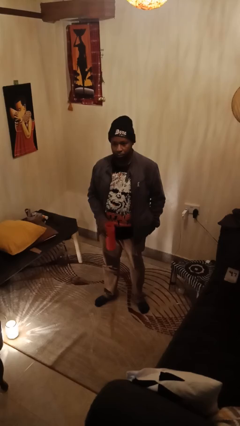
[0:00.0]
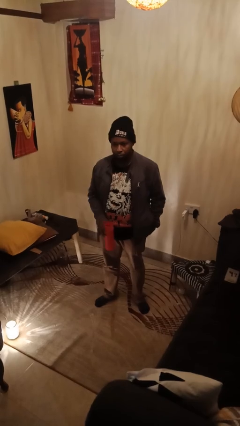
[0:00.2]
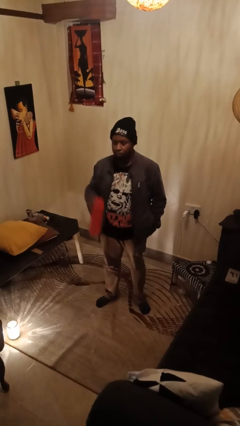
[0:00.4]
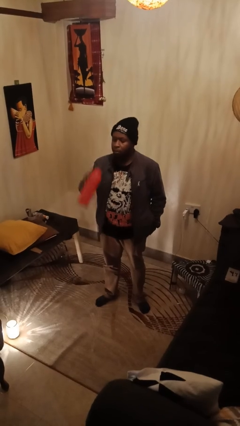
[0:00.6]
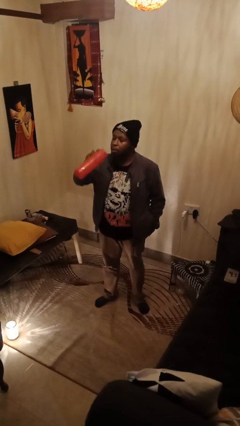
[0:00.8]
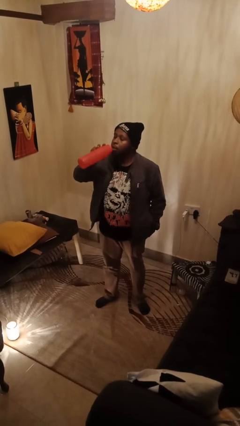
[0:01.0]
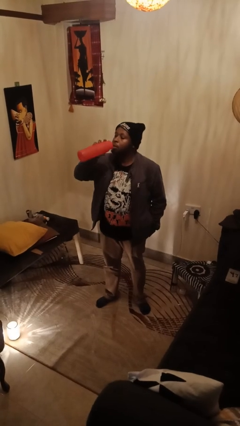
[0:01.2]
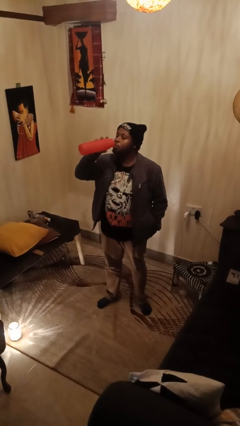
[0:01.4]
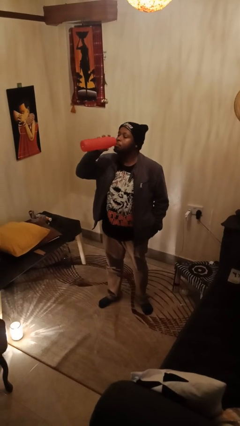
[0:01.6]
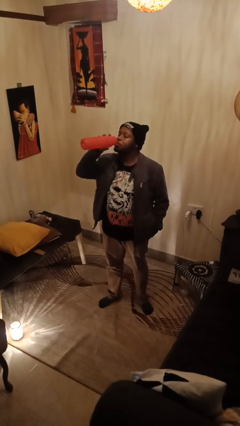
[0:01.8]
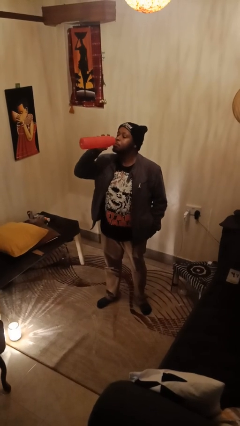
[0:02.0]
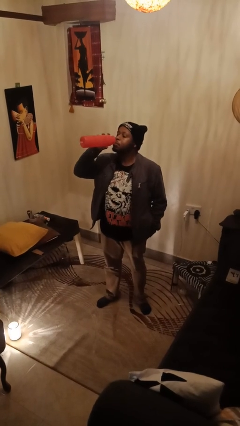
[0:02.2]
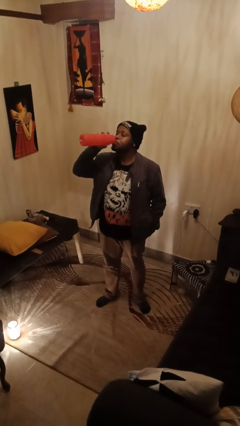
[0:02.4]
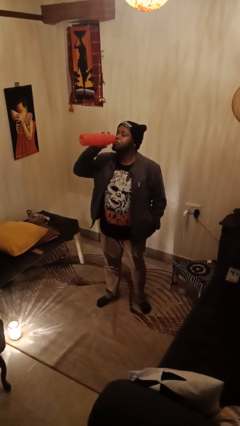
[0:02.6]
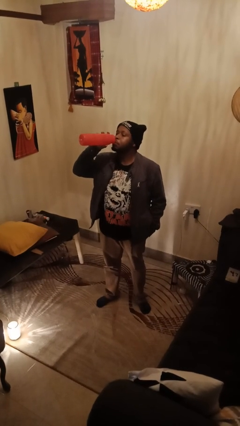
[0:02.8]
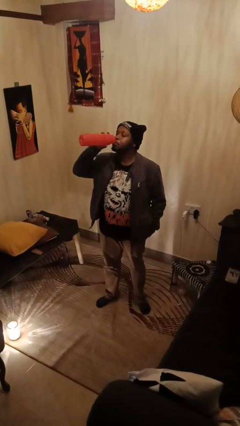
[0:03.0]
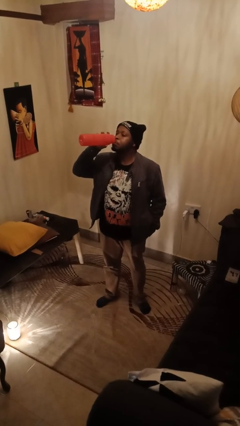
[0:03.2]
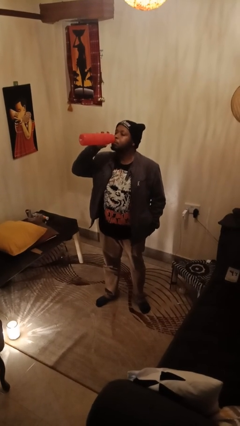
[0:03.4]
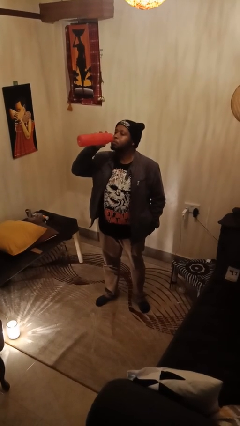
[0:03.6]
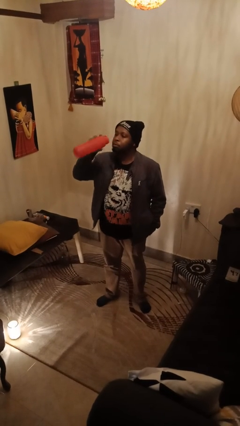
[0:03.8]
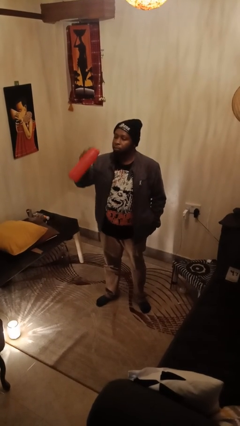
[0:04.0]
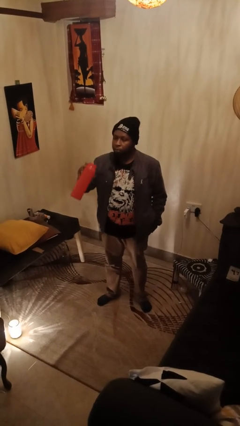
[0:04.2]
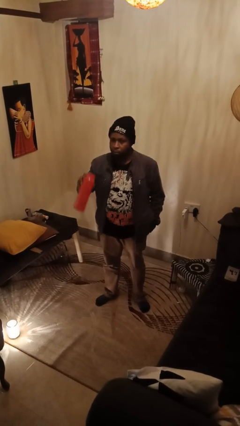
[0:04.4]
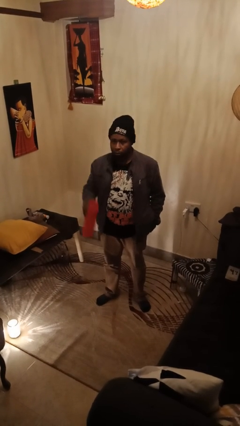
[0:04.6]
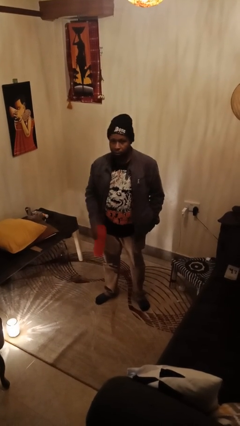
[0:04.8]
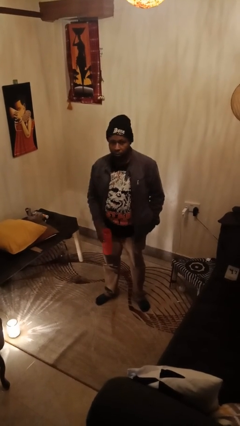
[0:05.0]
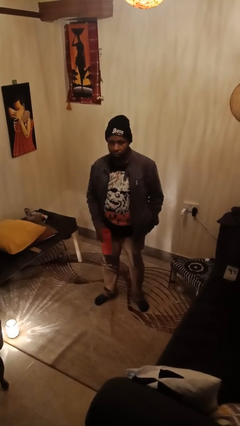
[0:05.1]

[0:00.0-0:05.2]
person drinks from bottle

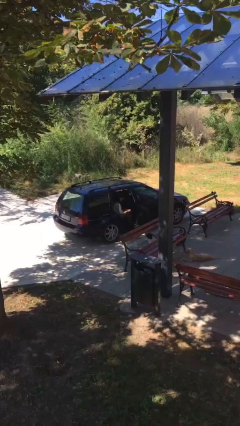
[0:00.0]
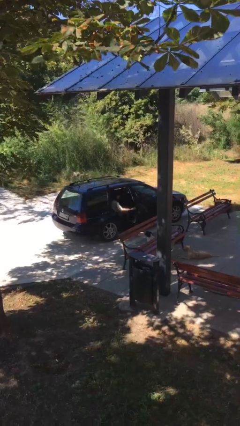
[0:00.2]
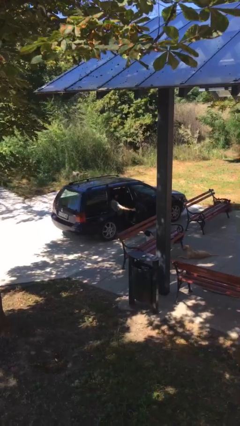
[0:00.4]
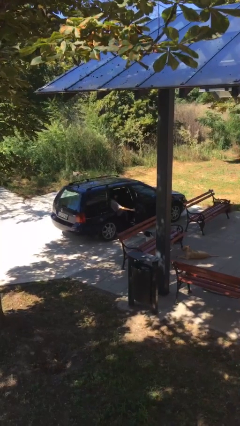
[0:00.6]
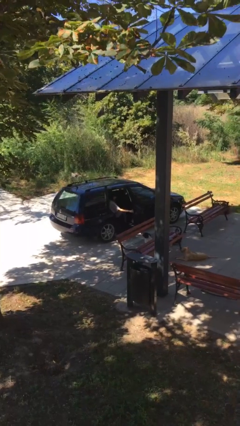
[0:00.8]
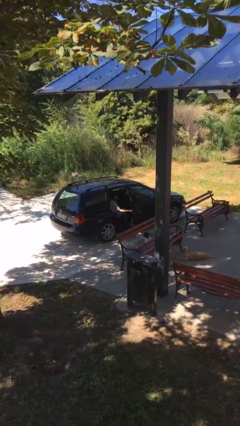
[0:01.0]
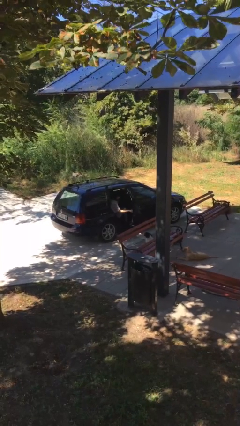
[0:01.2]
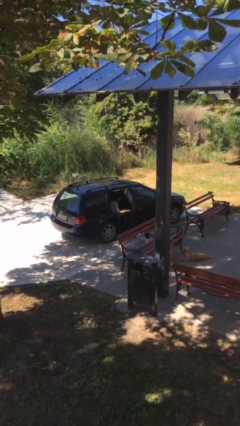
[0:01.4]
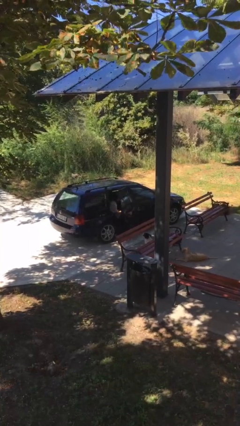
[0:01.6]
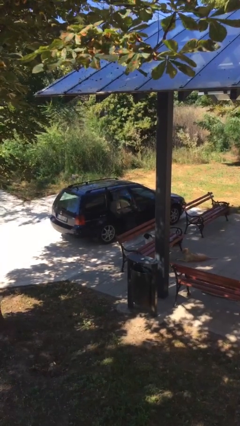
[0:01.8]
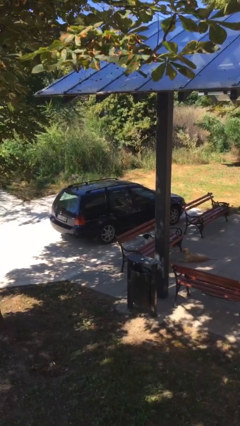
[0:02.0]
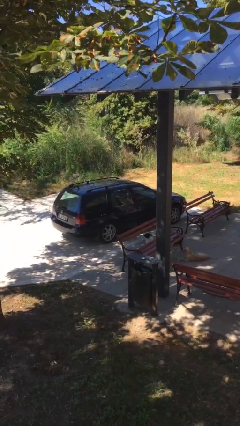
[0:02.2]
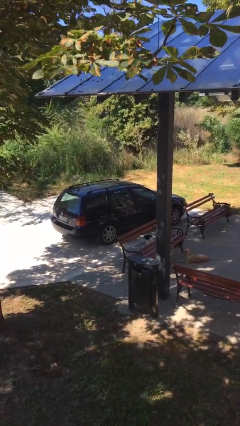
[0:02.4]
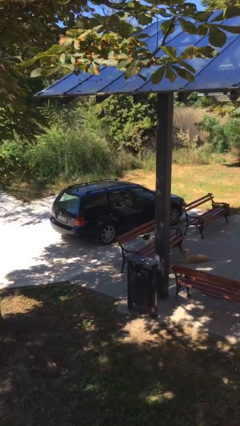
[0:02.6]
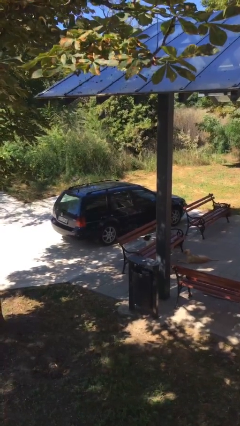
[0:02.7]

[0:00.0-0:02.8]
person closes car door

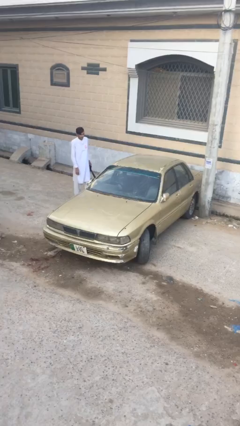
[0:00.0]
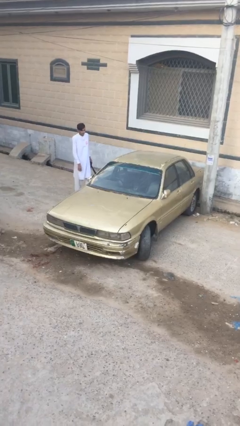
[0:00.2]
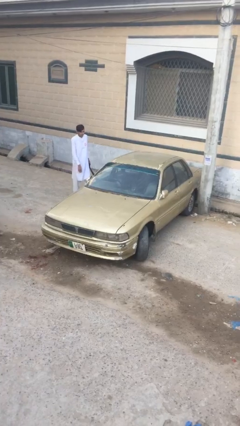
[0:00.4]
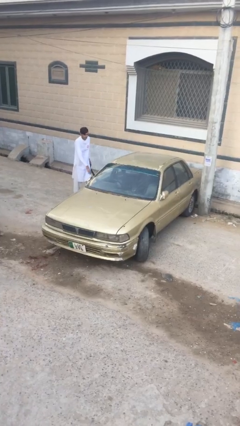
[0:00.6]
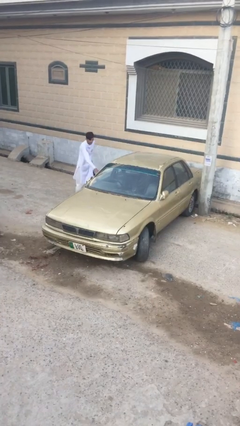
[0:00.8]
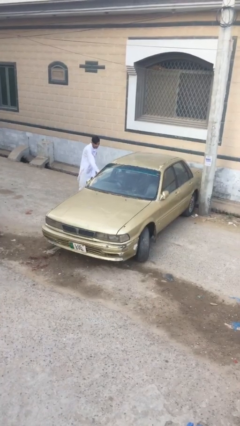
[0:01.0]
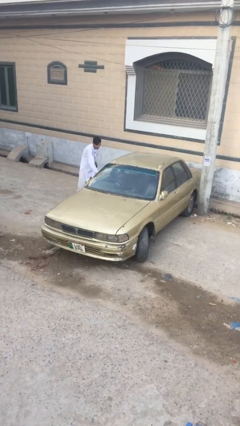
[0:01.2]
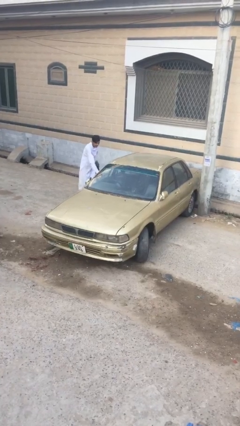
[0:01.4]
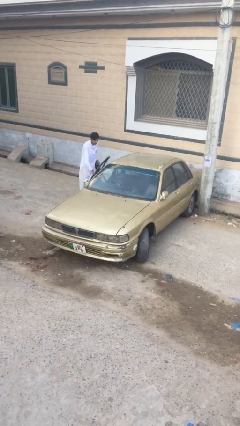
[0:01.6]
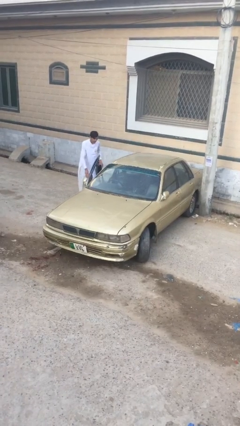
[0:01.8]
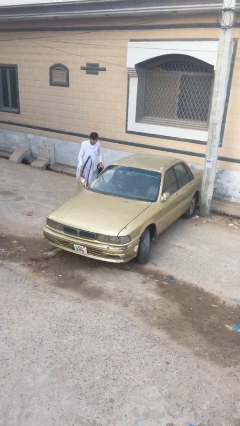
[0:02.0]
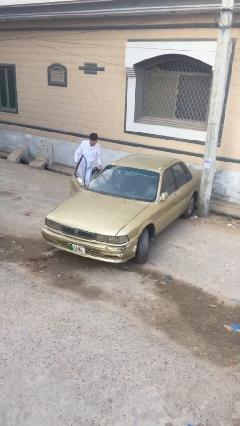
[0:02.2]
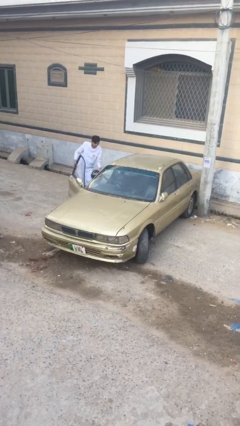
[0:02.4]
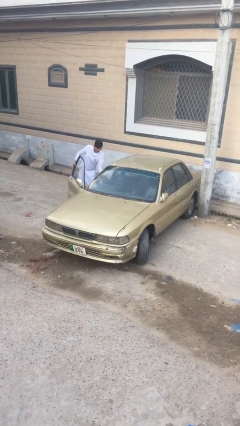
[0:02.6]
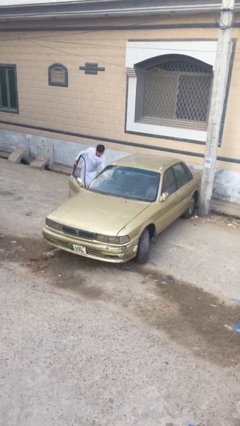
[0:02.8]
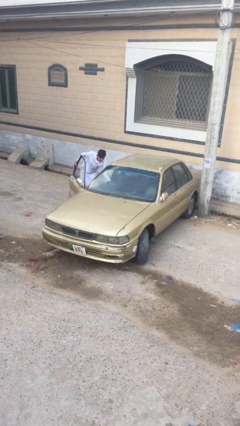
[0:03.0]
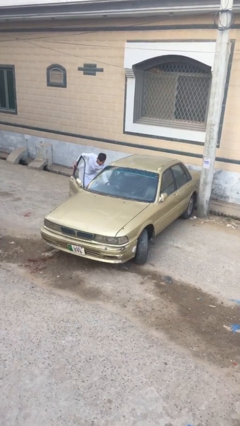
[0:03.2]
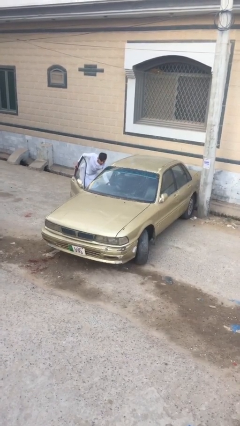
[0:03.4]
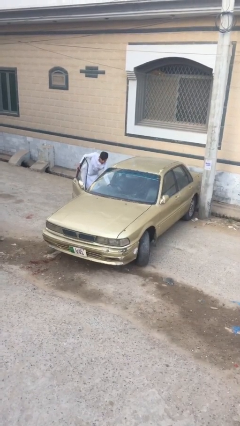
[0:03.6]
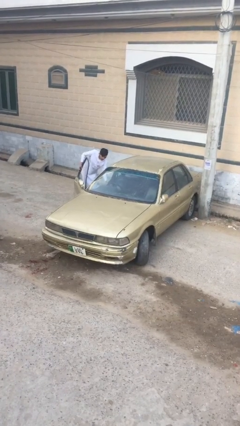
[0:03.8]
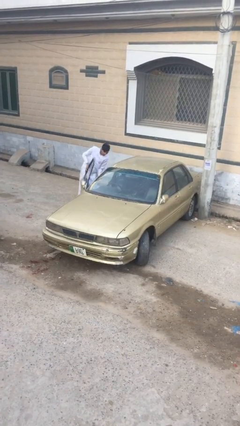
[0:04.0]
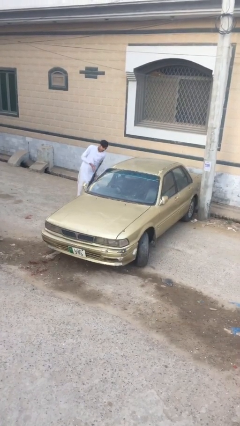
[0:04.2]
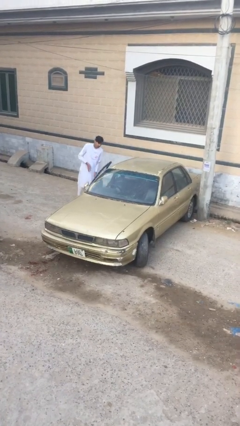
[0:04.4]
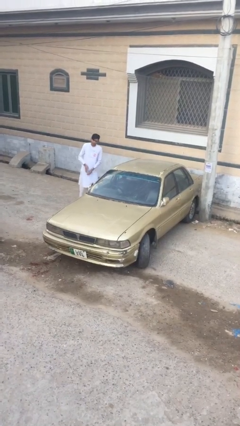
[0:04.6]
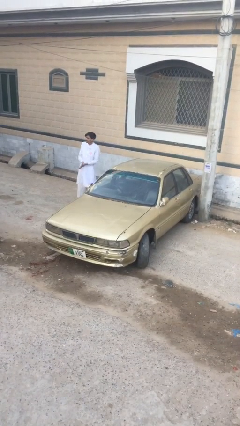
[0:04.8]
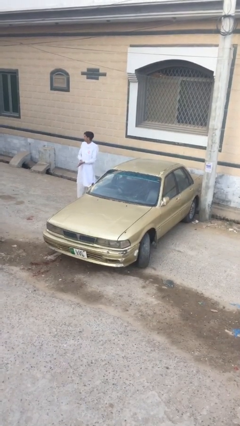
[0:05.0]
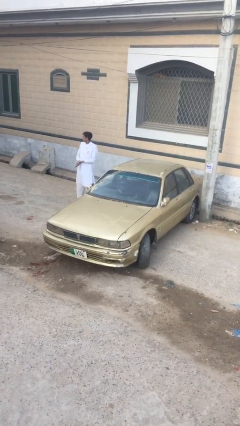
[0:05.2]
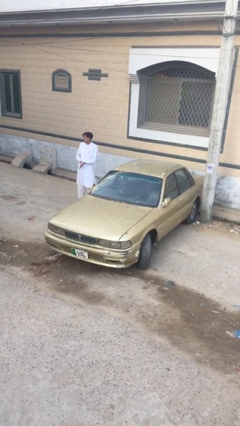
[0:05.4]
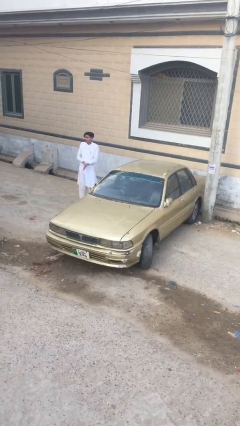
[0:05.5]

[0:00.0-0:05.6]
person loads car

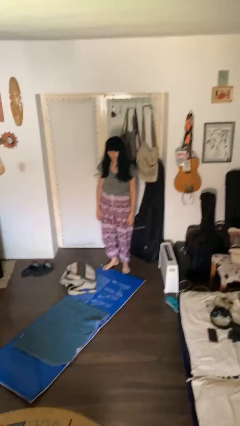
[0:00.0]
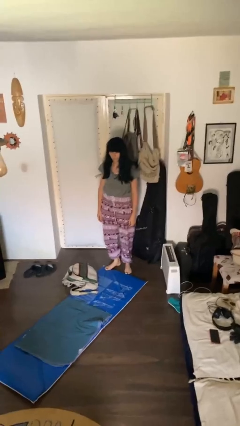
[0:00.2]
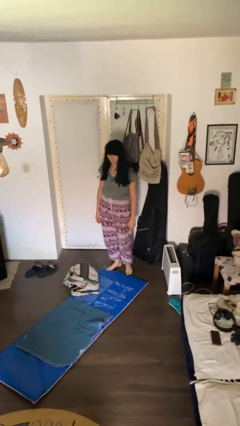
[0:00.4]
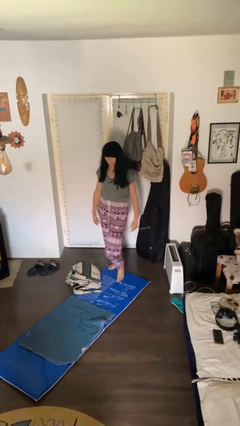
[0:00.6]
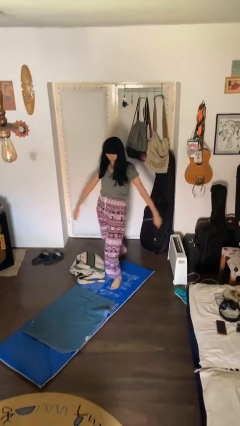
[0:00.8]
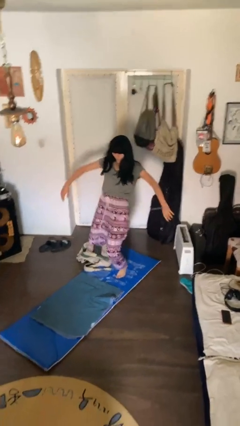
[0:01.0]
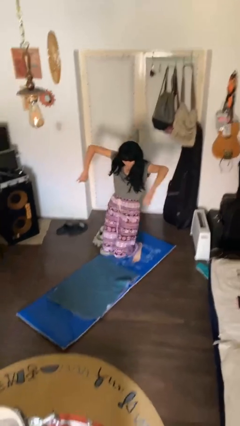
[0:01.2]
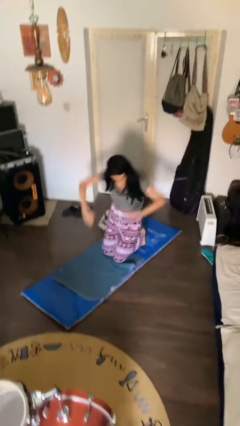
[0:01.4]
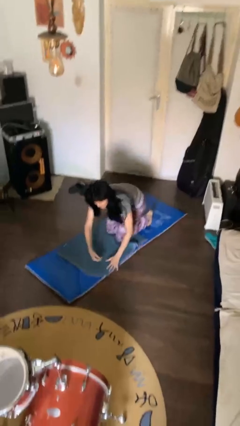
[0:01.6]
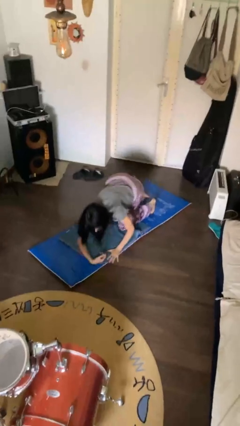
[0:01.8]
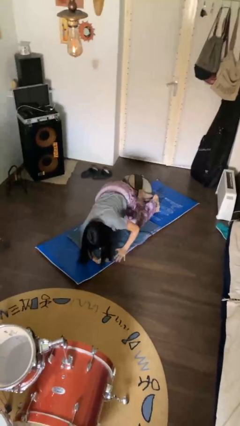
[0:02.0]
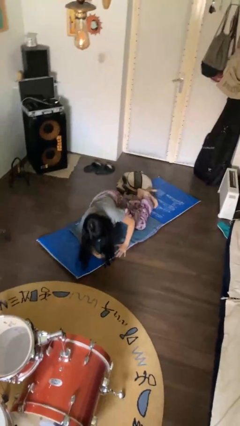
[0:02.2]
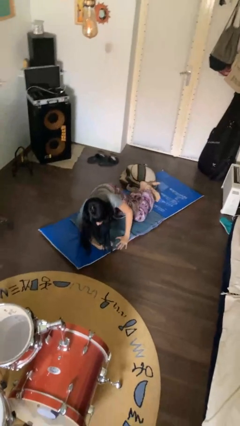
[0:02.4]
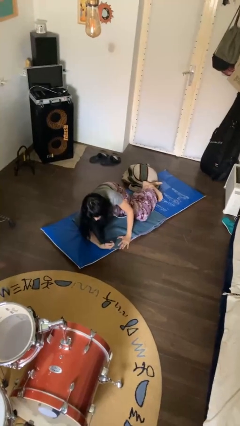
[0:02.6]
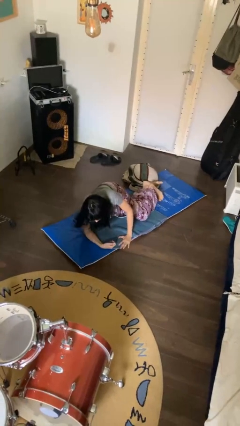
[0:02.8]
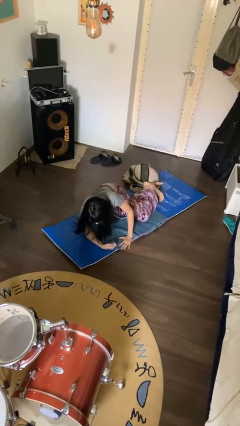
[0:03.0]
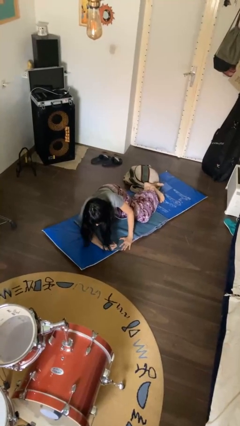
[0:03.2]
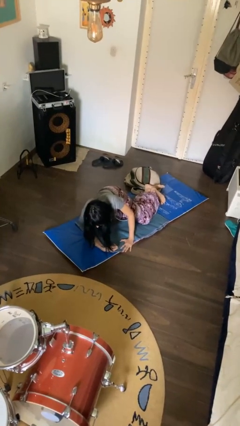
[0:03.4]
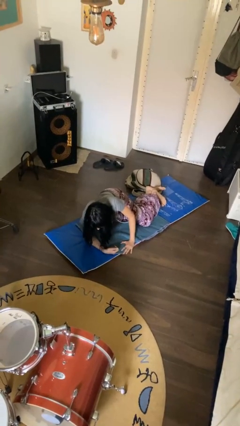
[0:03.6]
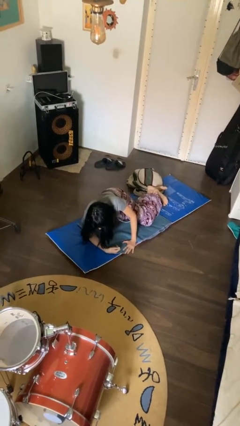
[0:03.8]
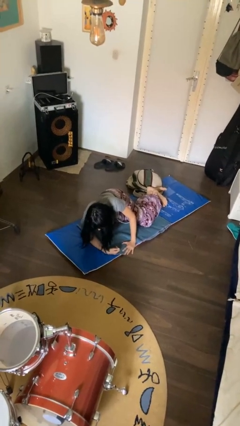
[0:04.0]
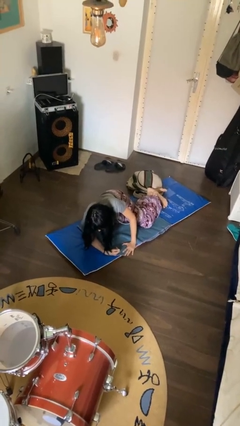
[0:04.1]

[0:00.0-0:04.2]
person trips on object on floor
